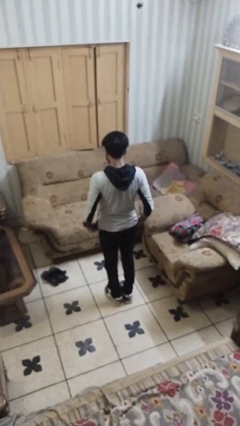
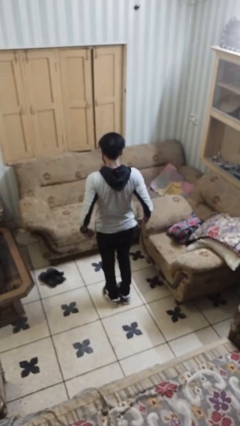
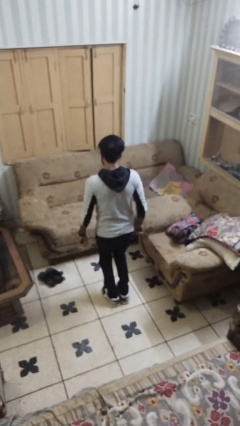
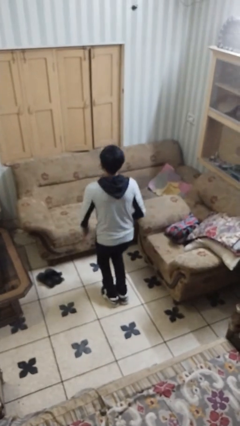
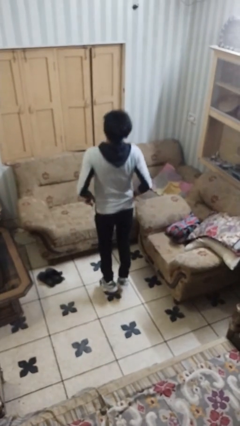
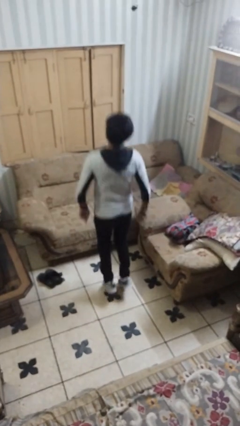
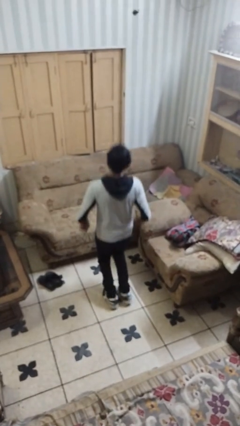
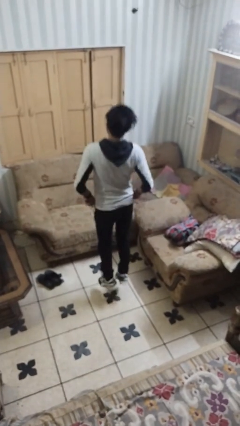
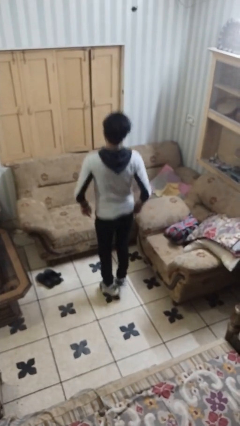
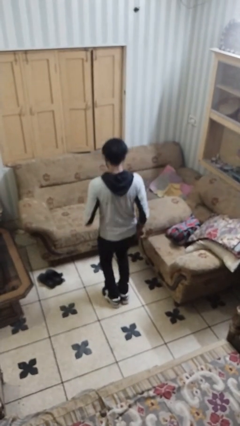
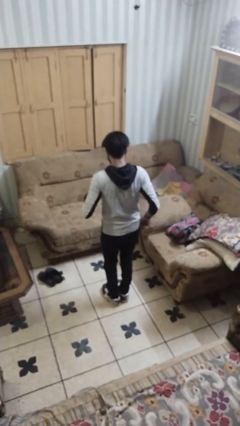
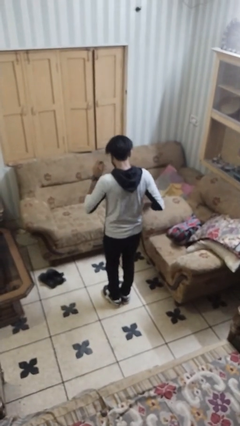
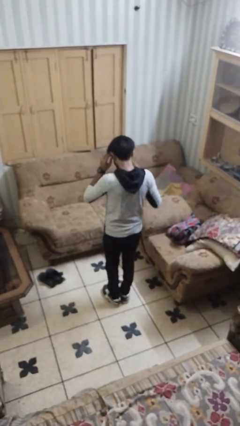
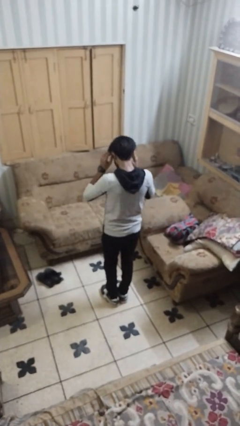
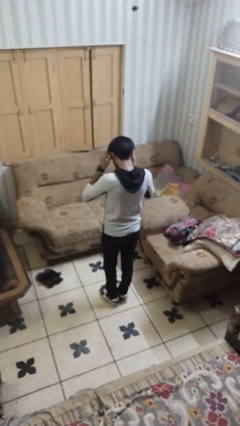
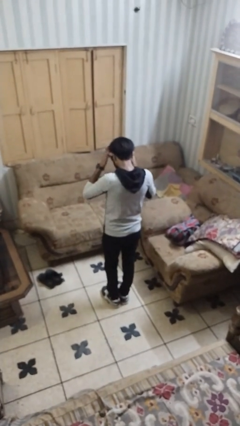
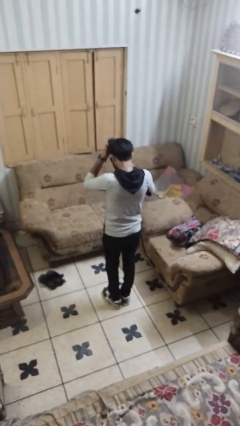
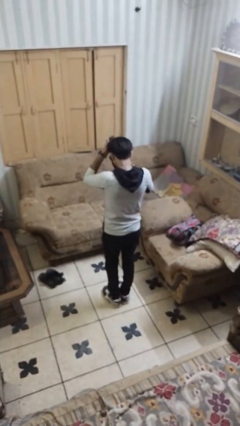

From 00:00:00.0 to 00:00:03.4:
person jumps

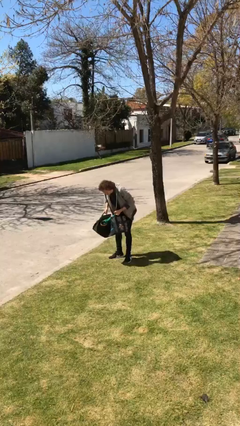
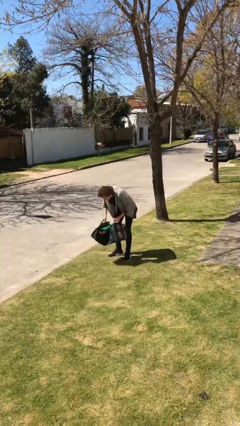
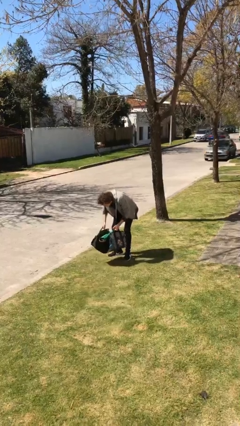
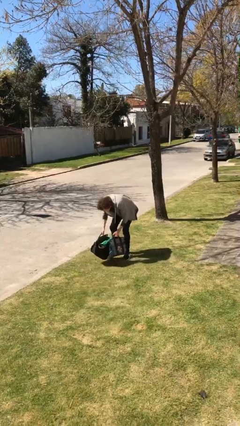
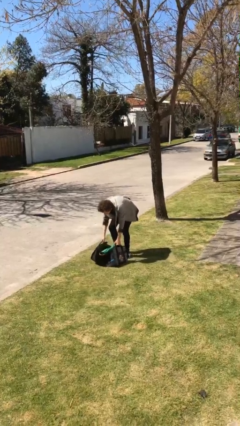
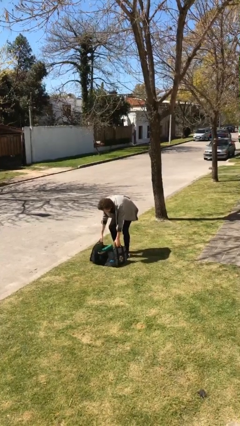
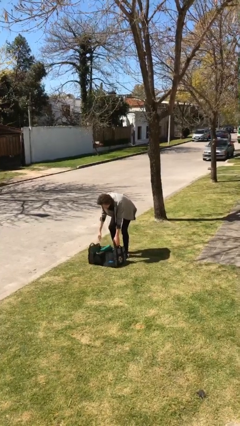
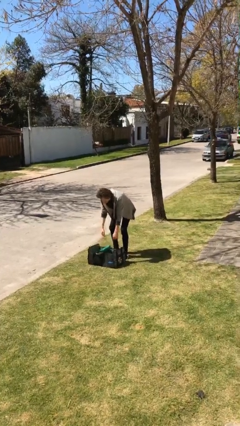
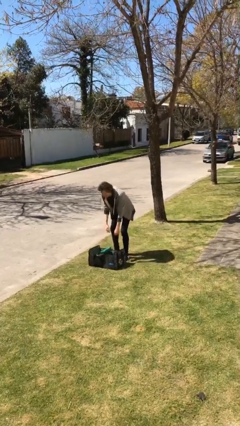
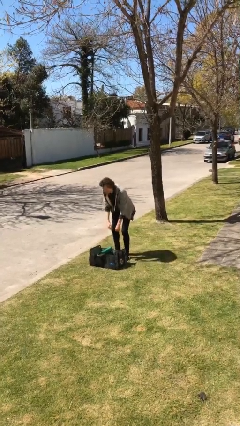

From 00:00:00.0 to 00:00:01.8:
person puts down object on floor

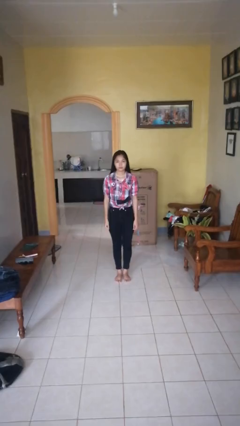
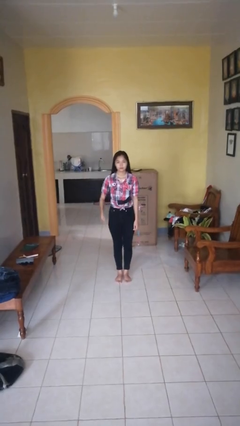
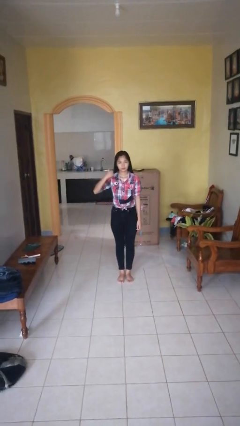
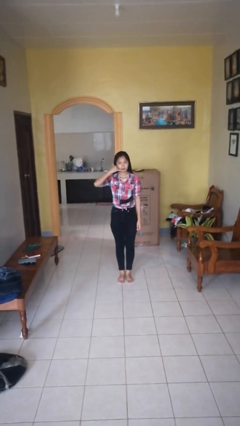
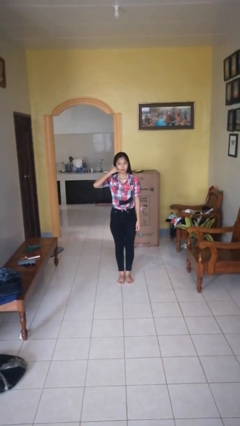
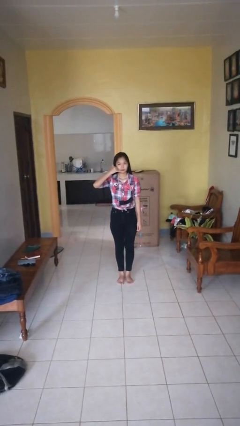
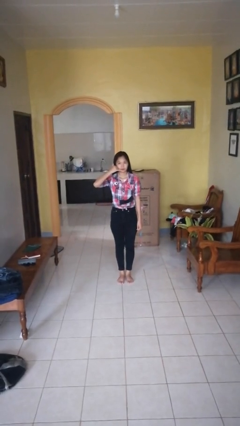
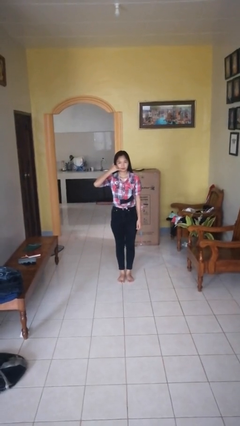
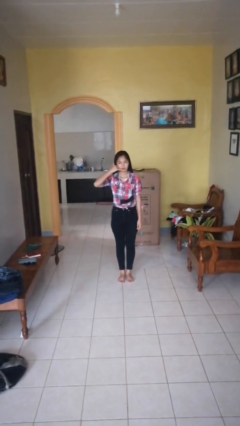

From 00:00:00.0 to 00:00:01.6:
person gestures call me

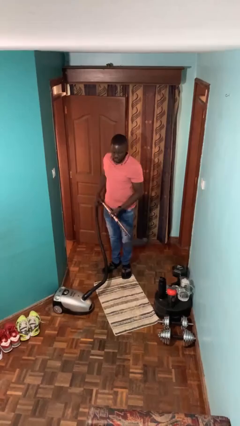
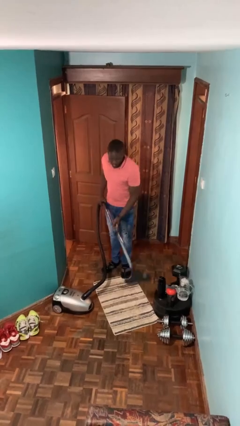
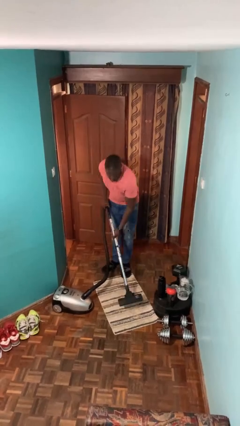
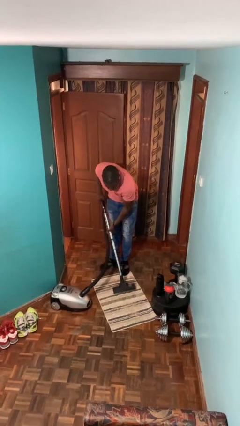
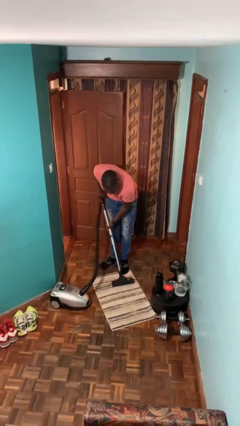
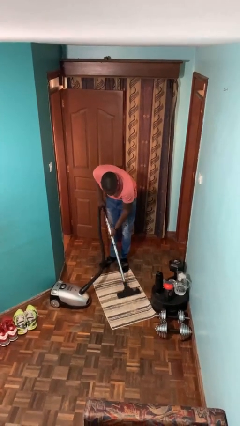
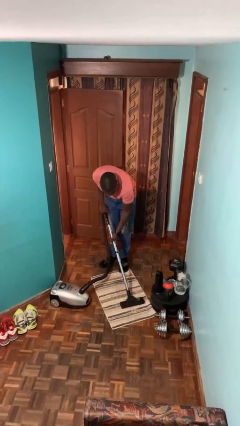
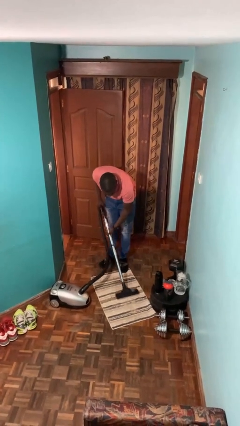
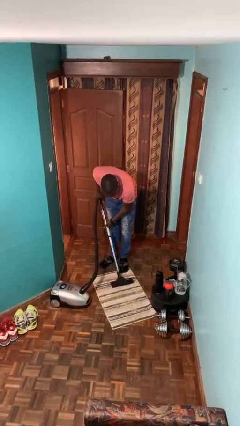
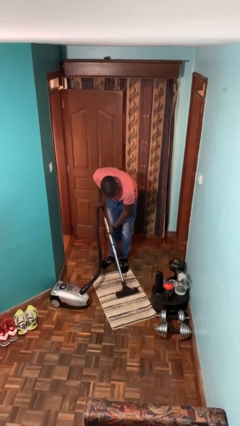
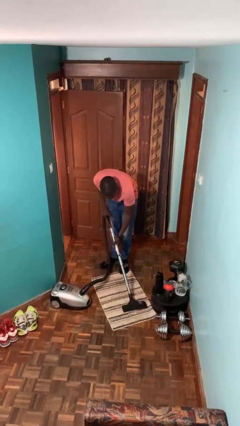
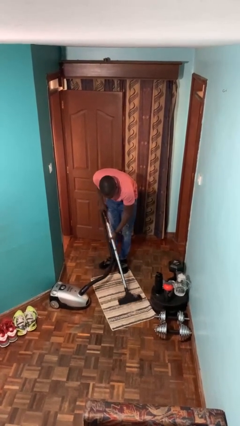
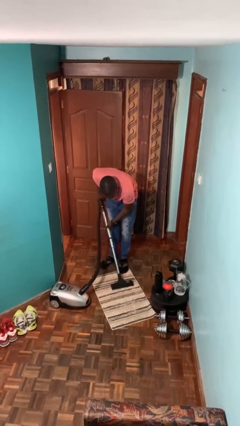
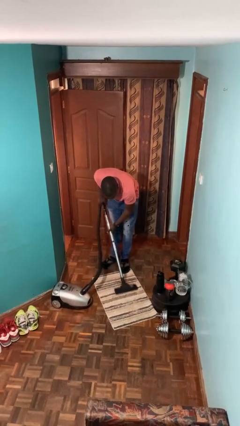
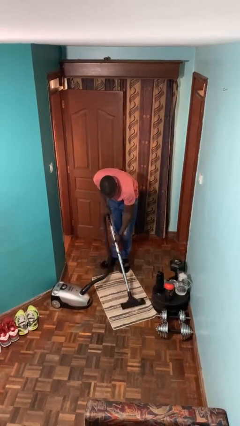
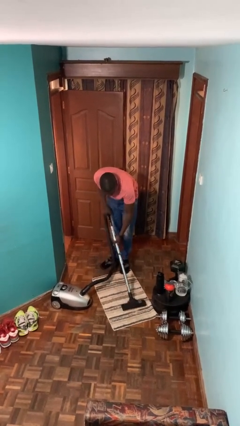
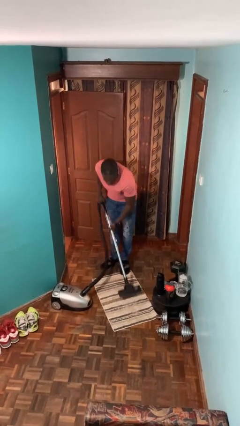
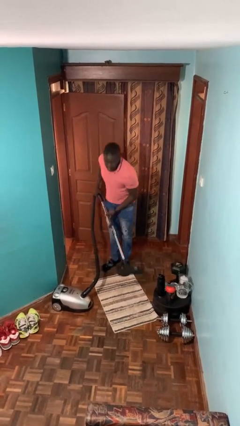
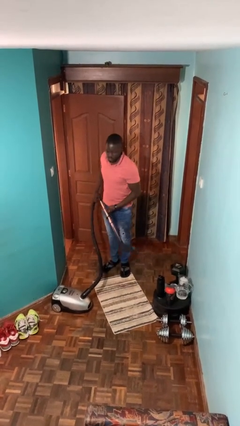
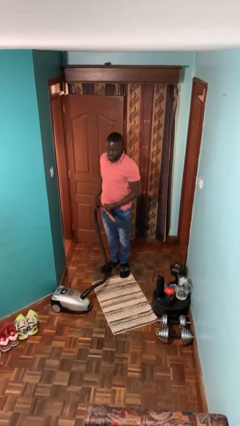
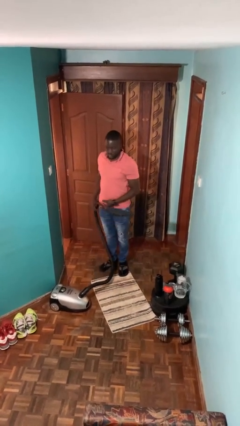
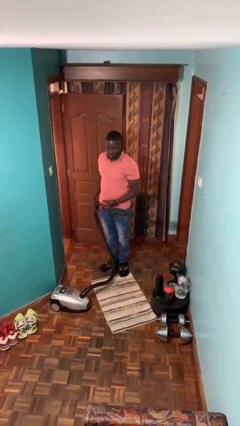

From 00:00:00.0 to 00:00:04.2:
person vacuums carpet

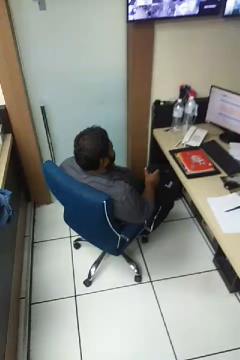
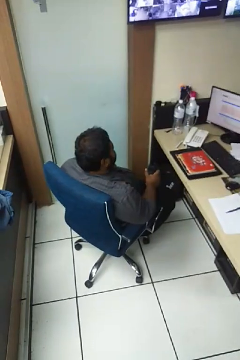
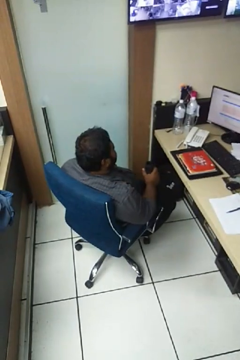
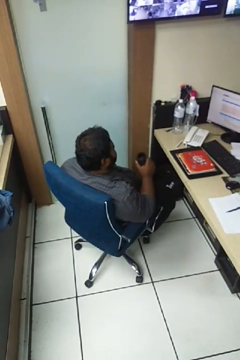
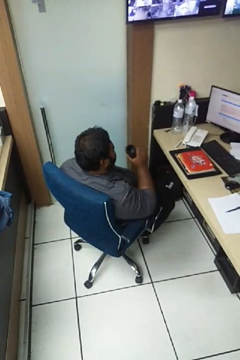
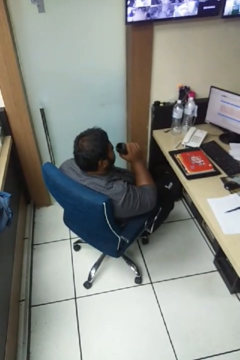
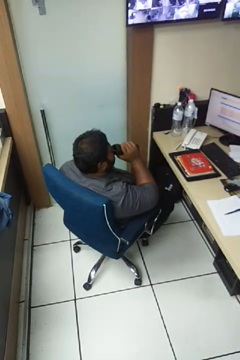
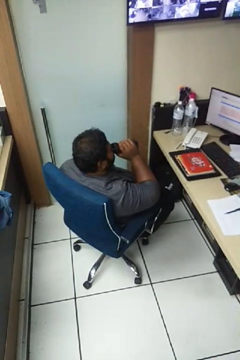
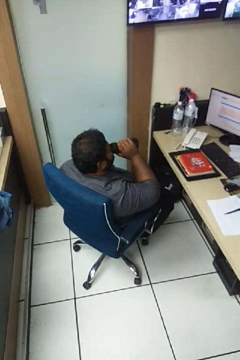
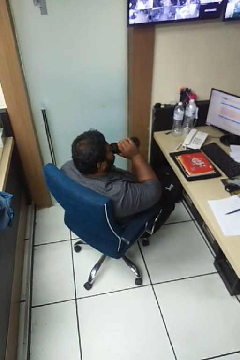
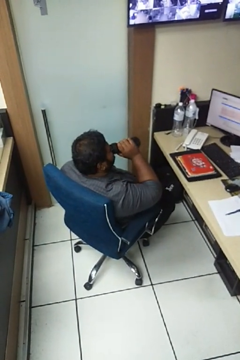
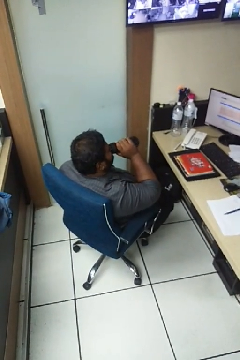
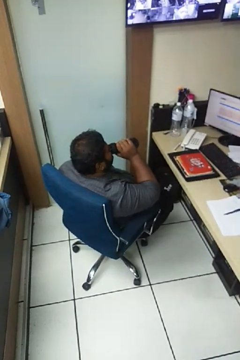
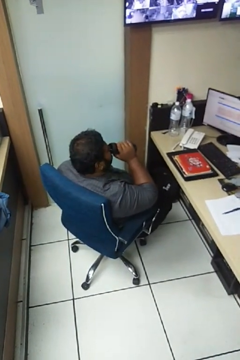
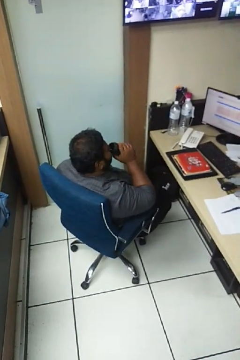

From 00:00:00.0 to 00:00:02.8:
person drinks from bottle

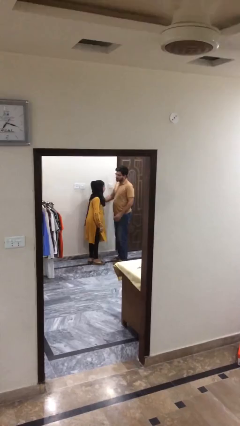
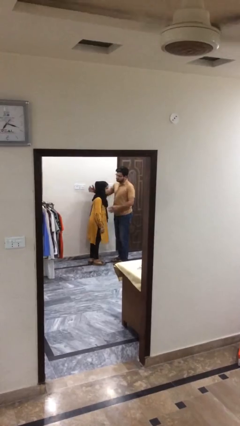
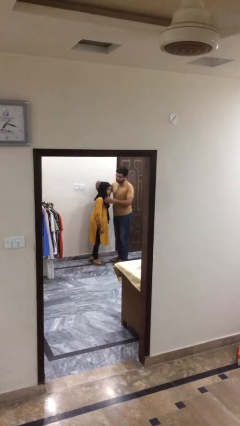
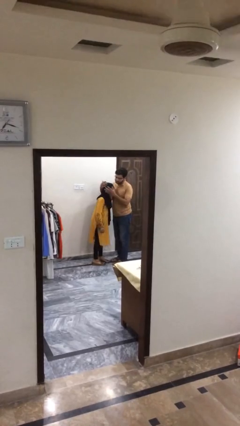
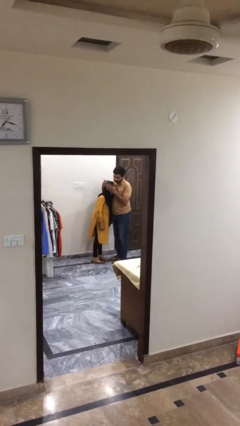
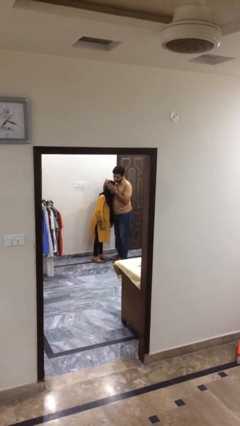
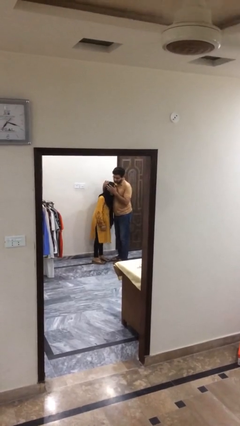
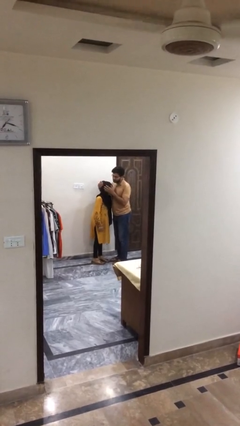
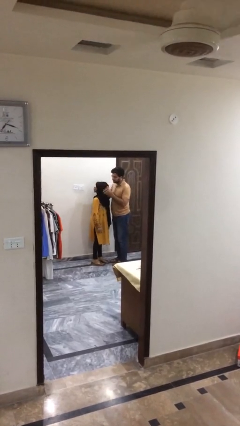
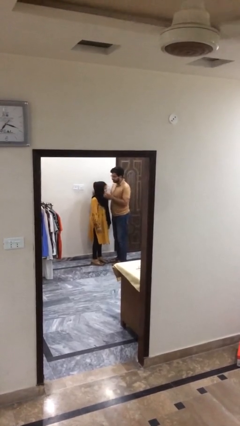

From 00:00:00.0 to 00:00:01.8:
person embraces person

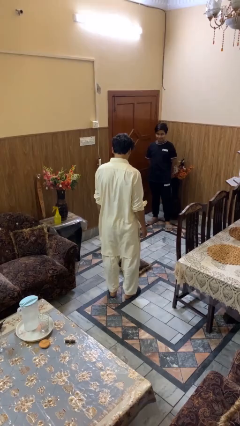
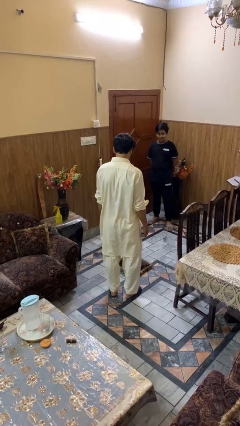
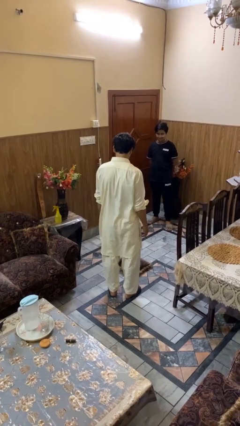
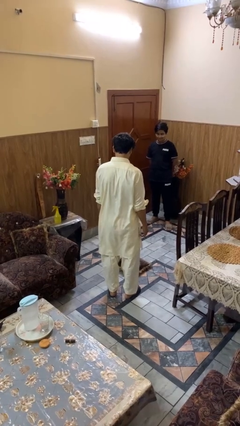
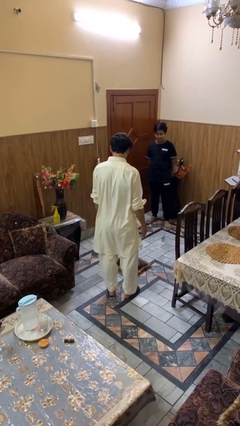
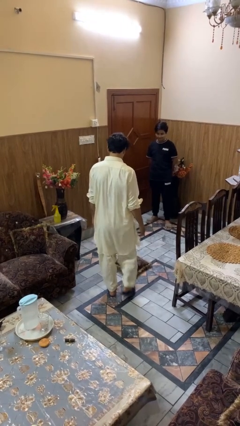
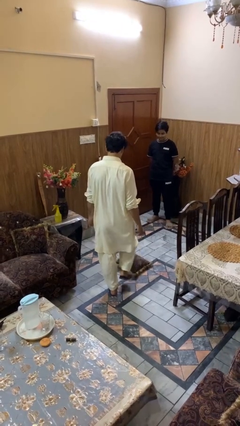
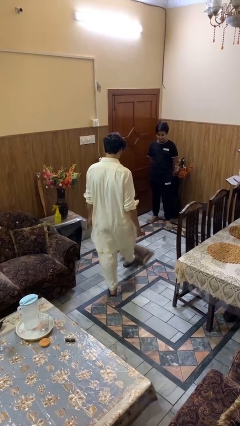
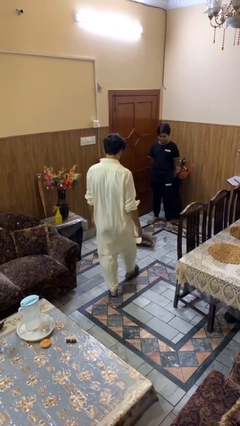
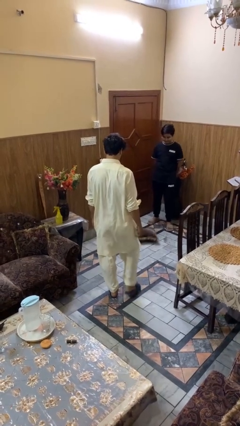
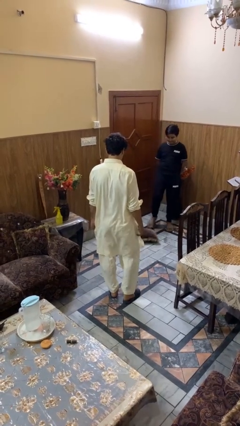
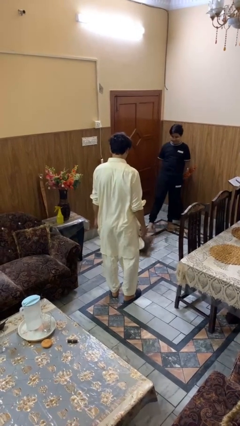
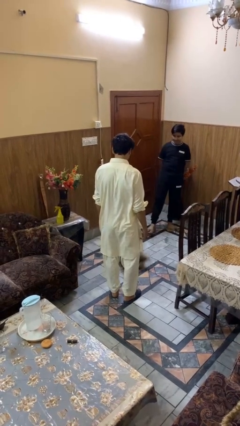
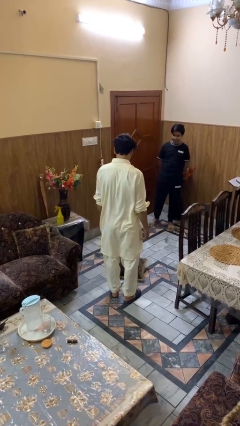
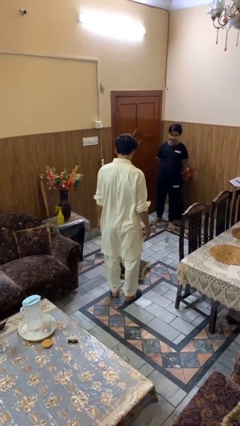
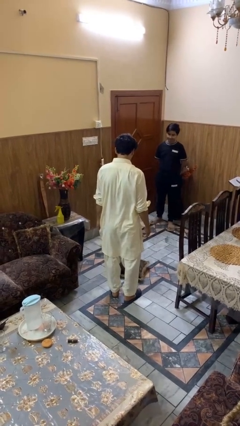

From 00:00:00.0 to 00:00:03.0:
person kicks object to person
